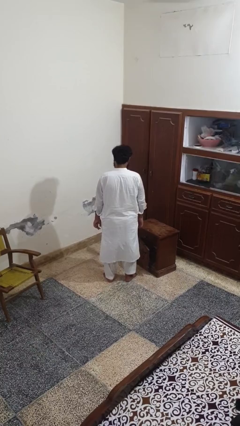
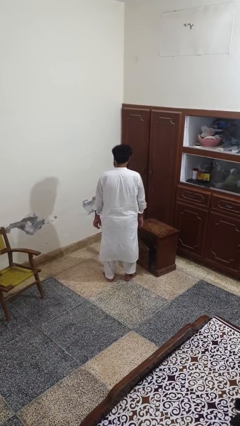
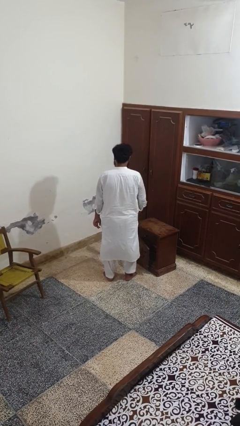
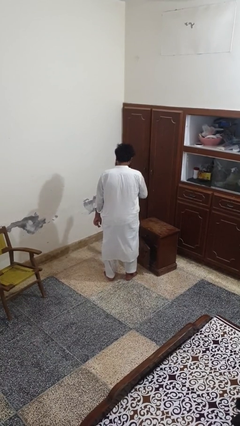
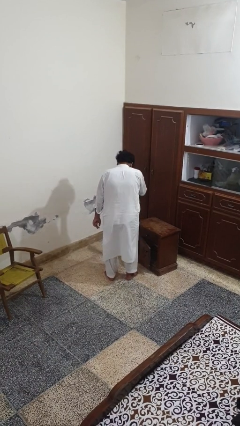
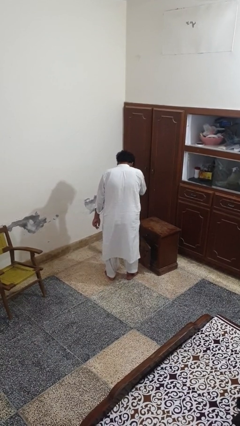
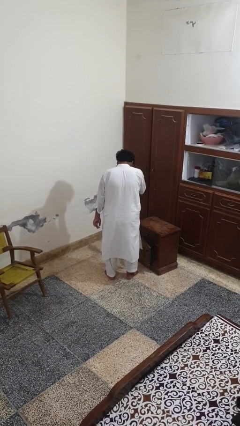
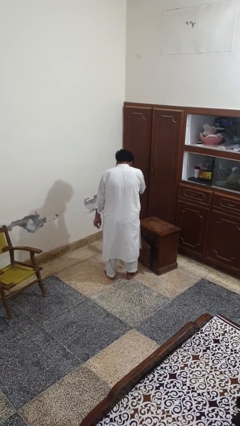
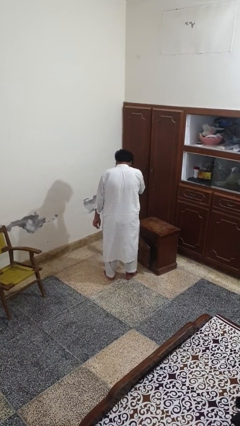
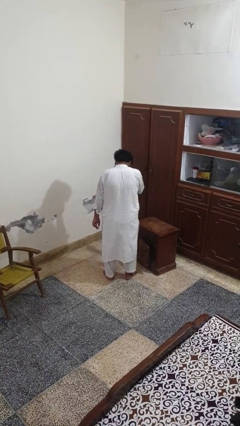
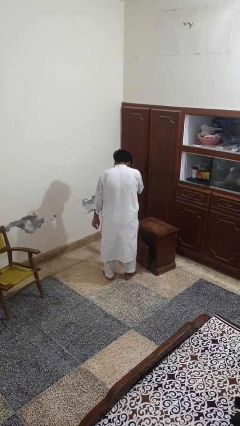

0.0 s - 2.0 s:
person sneezes into hand

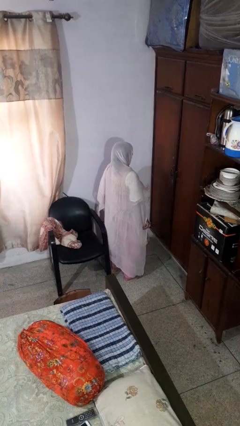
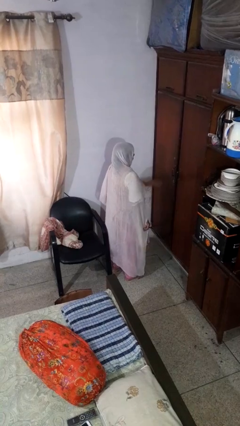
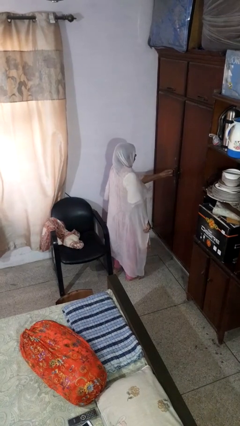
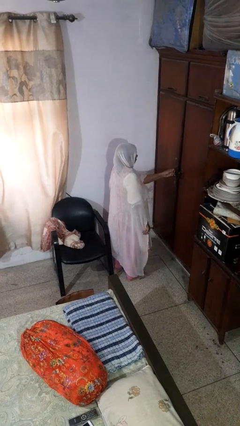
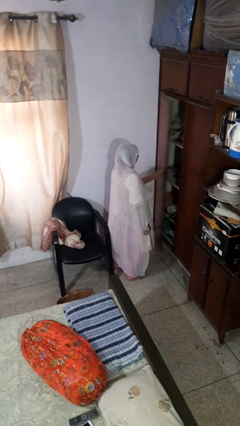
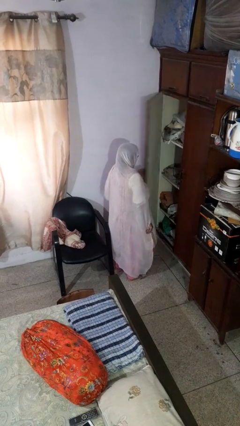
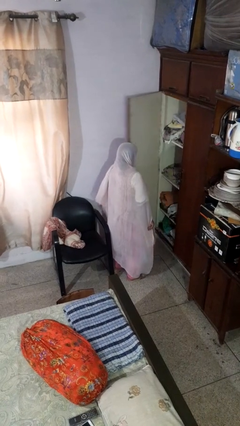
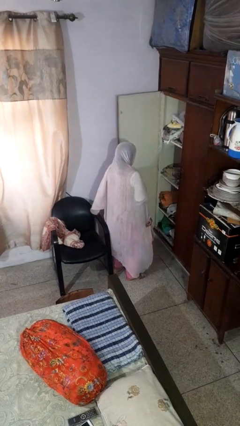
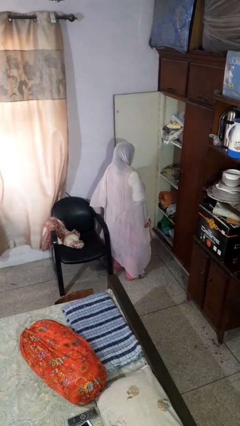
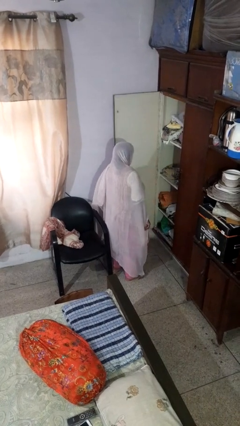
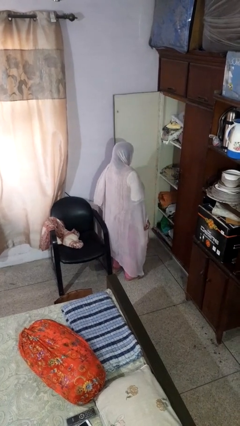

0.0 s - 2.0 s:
person opens closet door

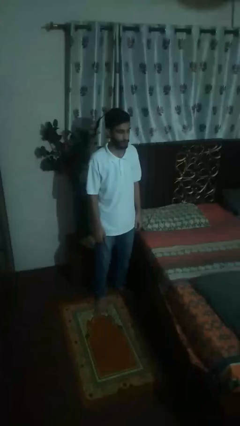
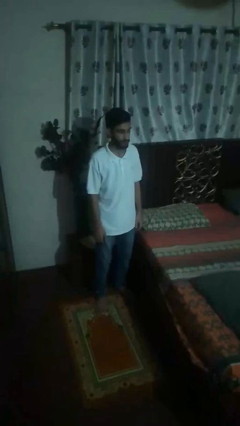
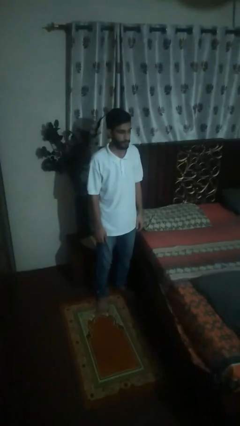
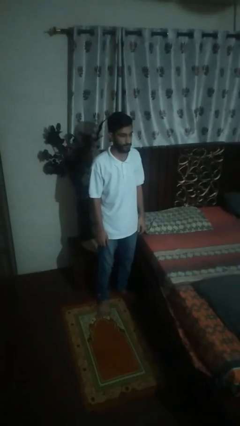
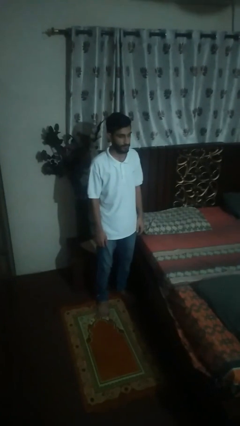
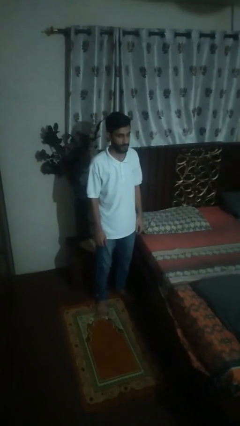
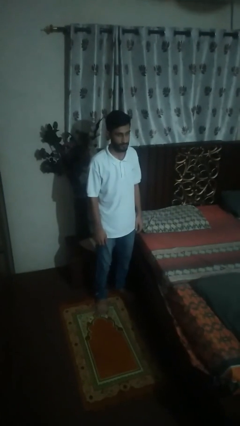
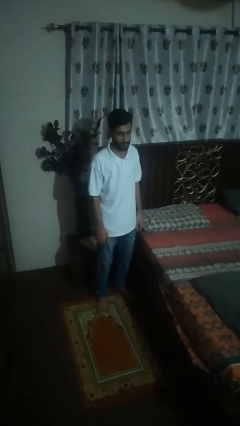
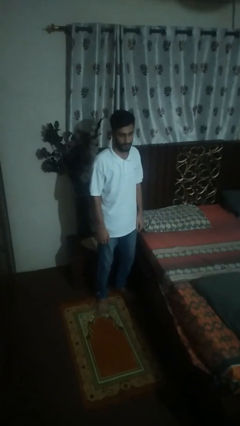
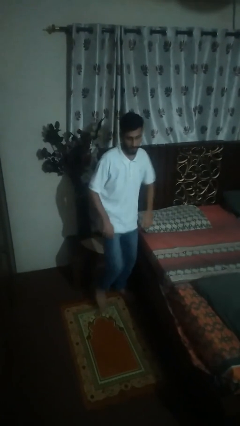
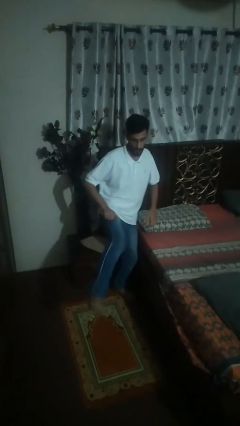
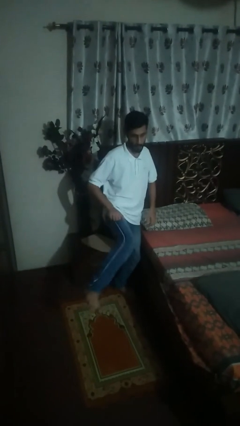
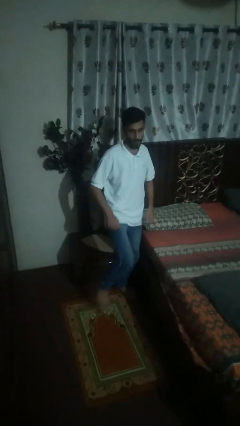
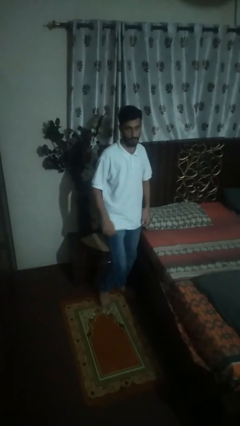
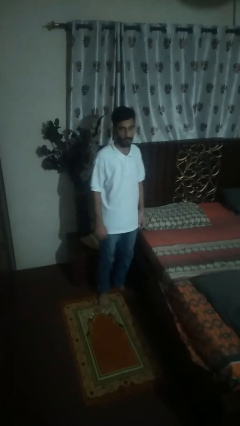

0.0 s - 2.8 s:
person karate kicks

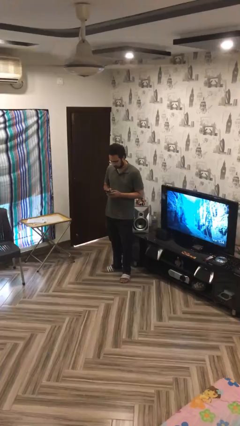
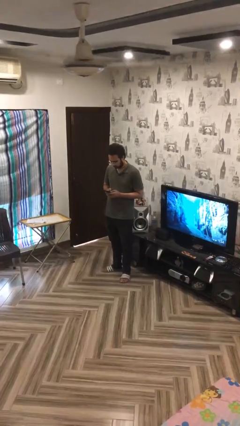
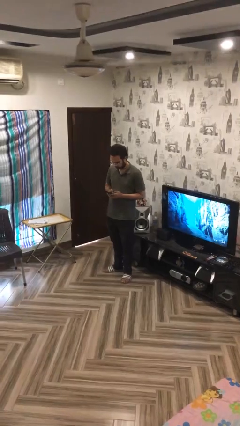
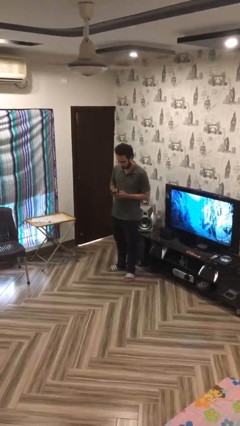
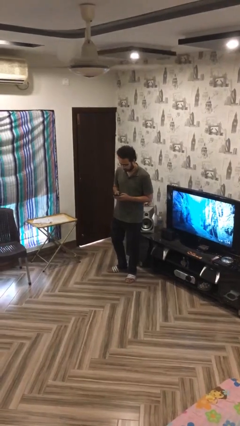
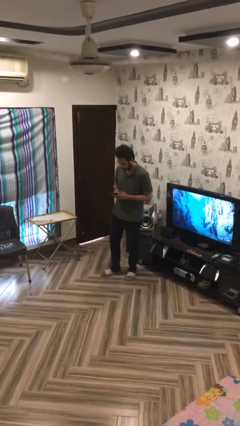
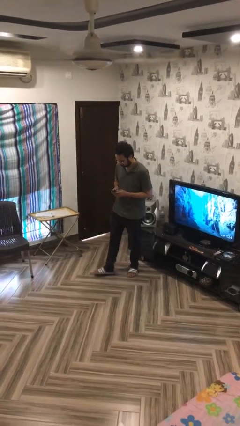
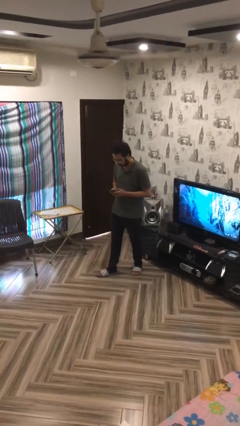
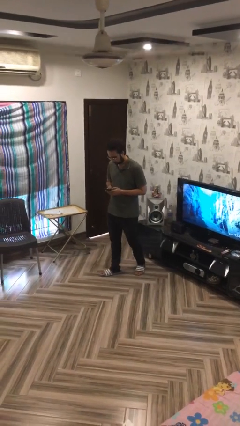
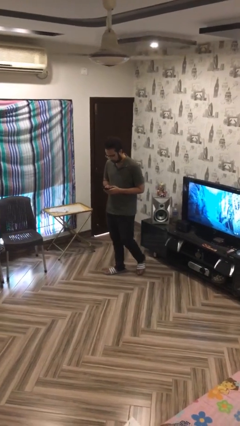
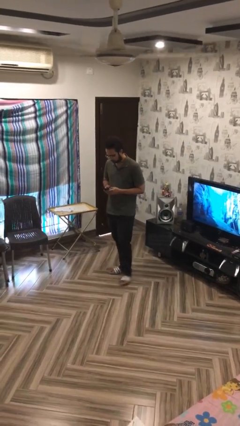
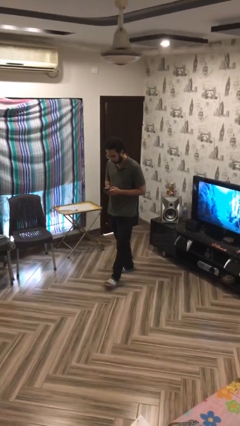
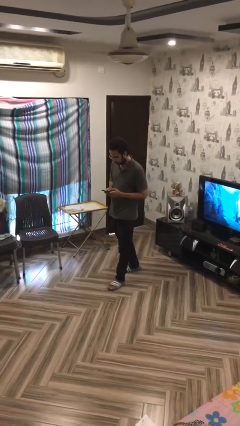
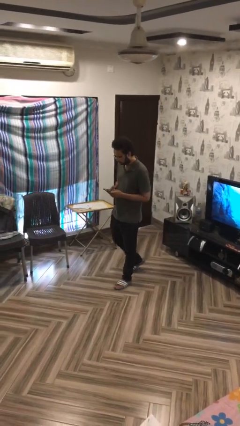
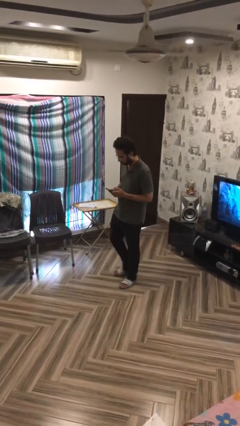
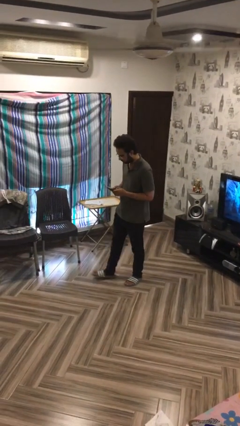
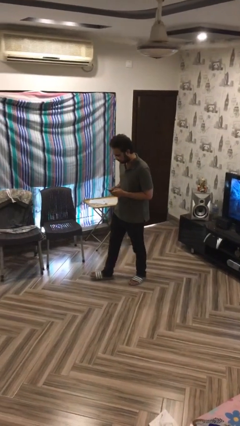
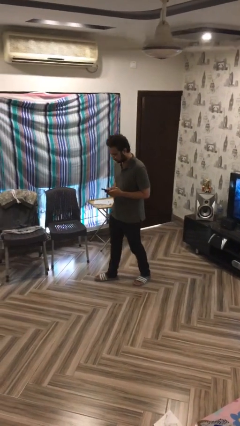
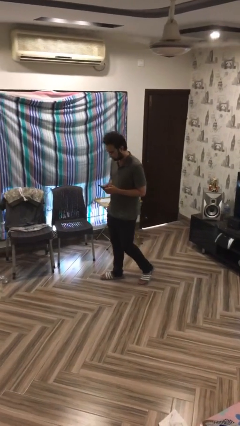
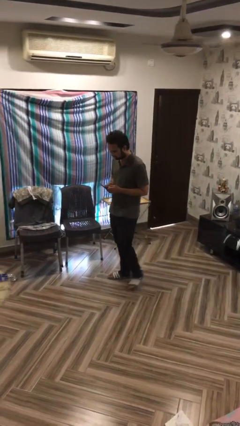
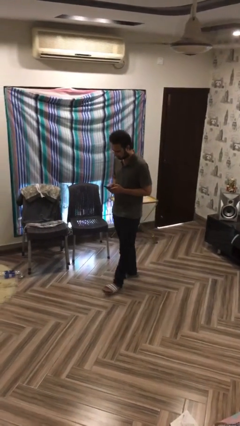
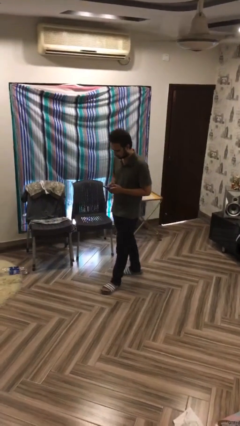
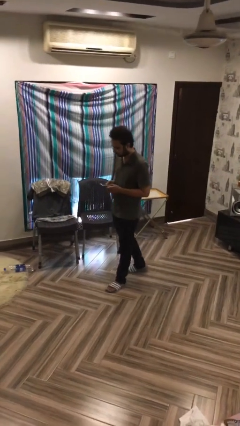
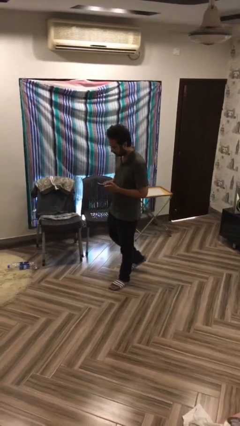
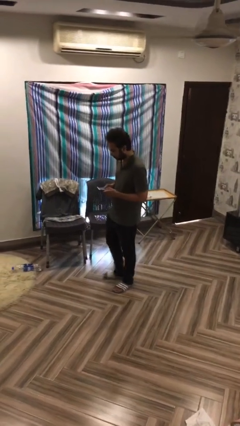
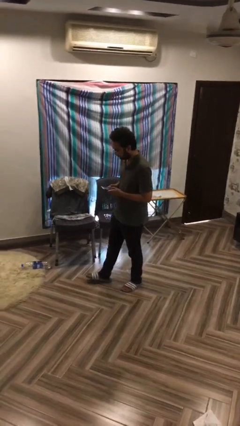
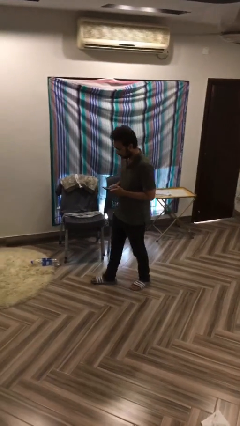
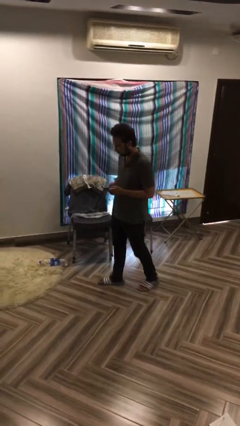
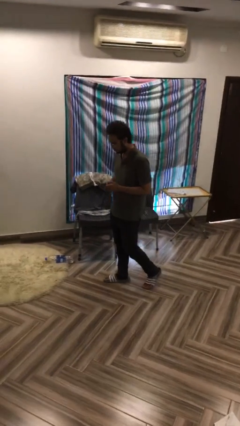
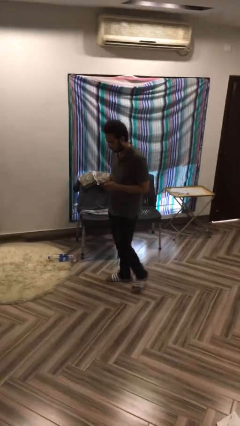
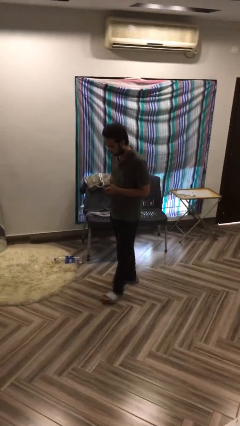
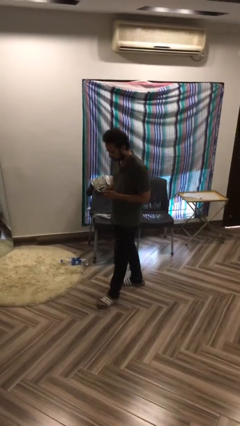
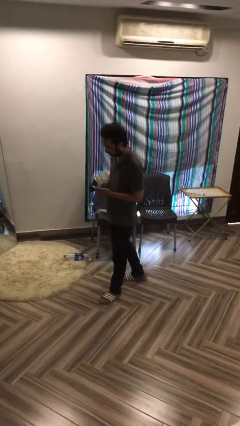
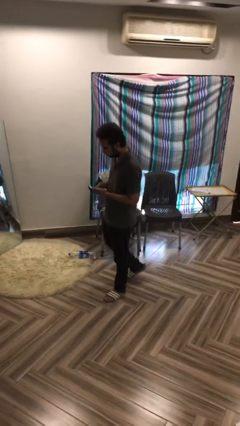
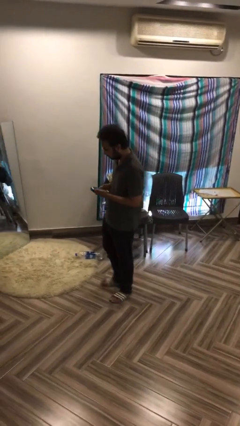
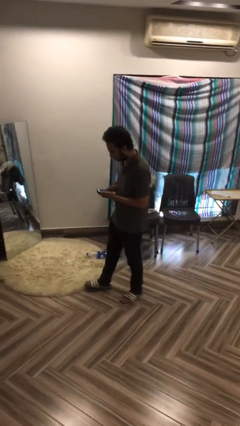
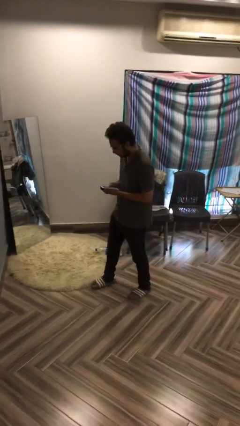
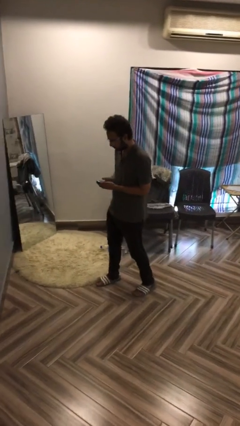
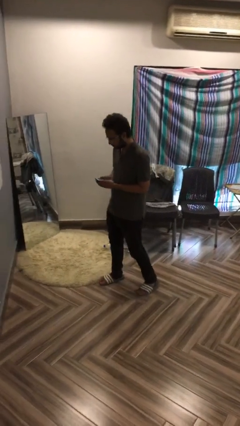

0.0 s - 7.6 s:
person texts on phone

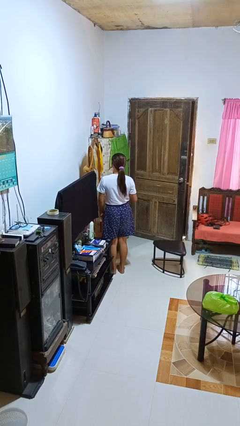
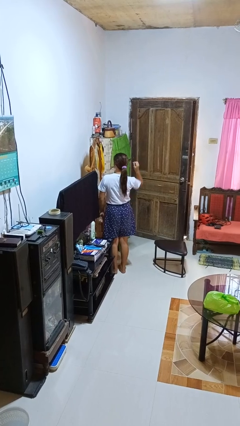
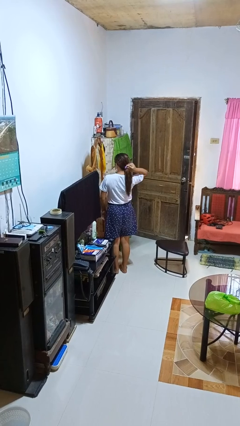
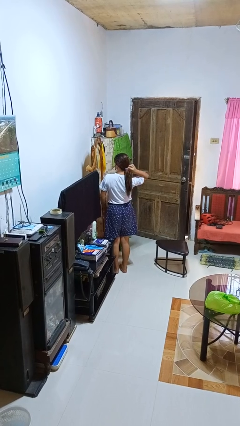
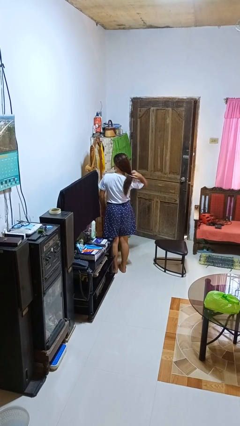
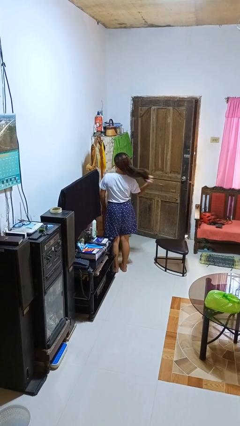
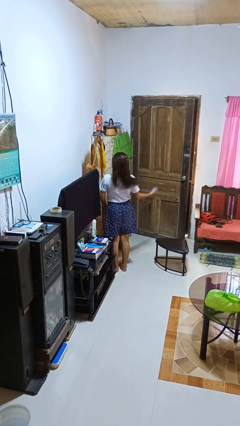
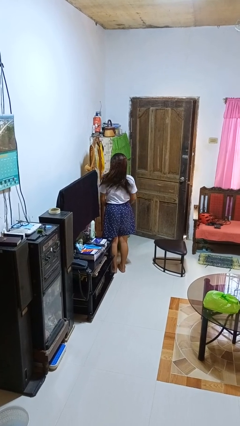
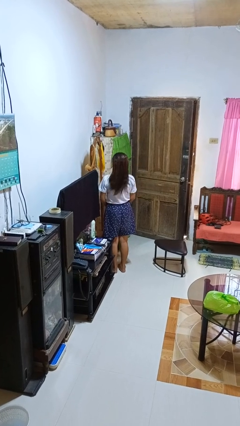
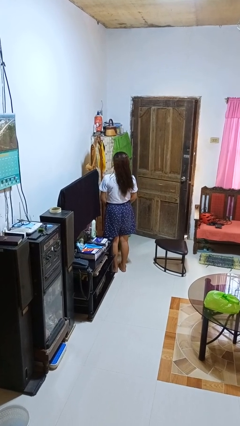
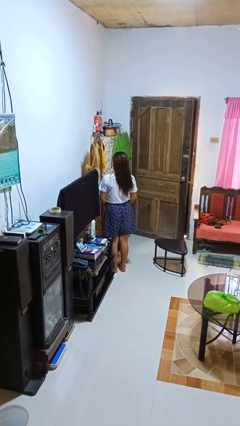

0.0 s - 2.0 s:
person takes off hairtie

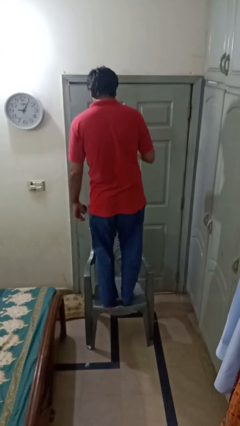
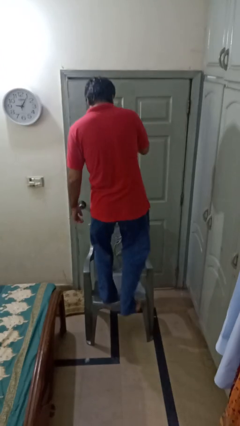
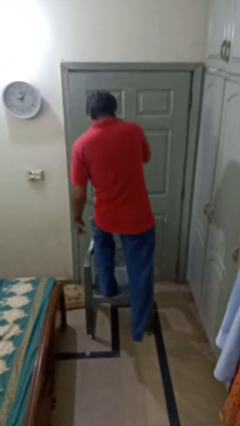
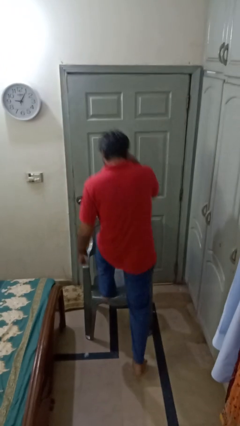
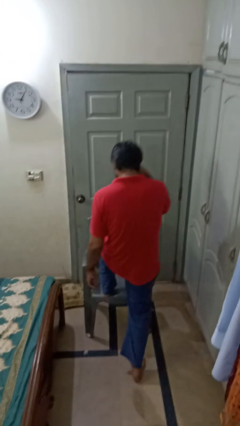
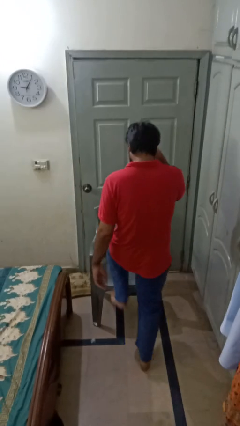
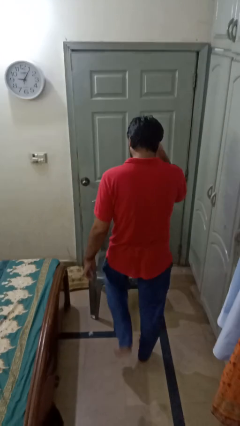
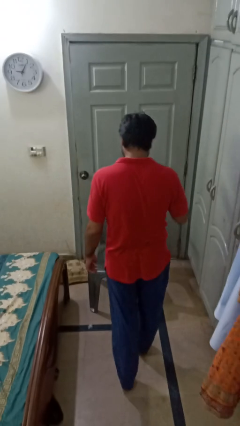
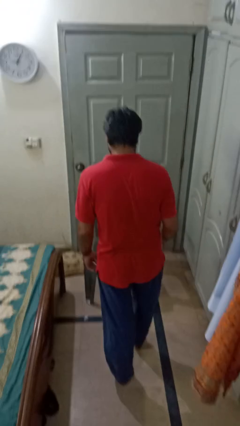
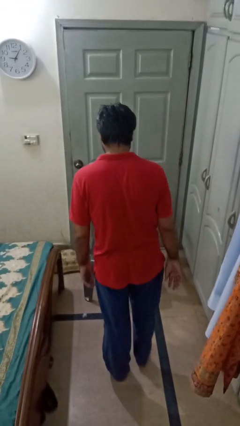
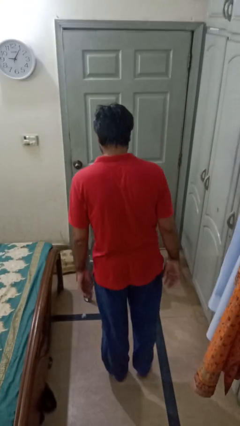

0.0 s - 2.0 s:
person climbs off chair
